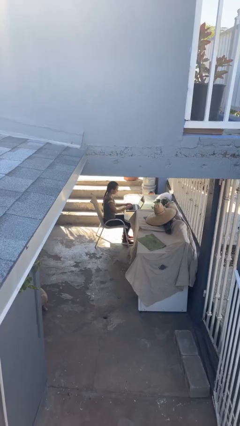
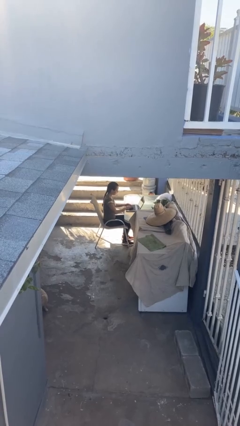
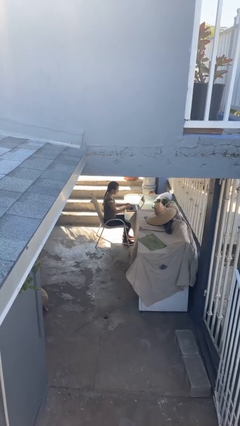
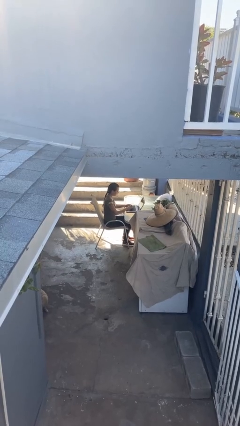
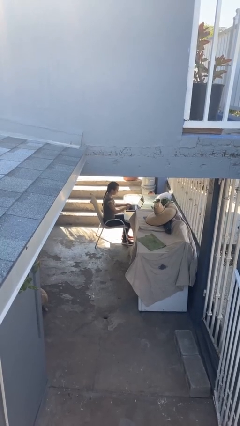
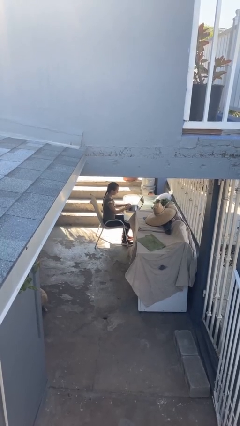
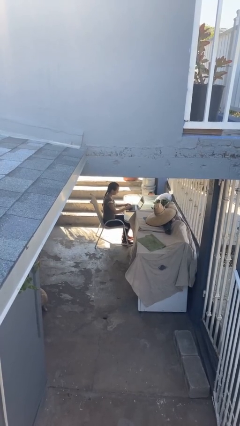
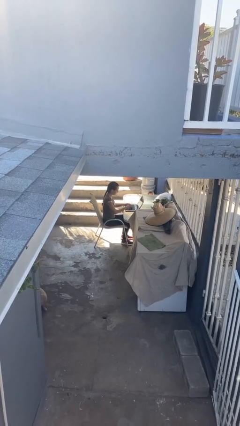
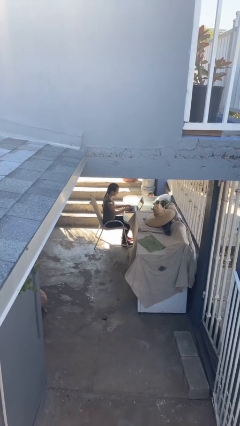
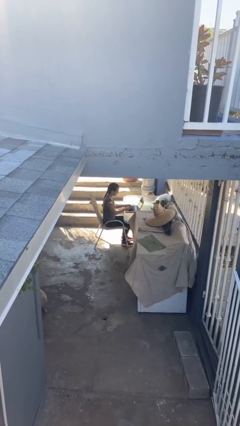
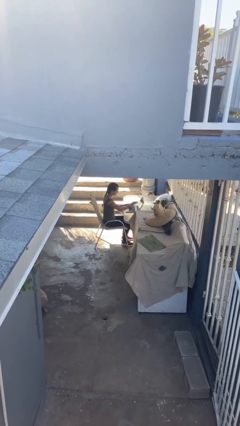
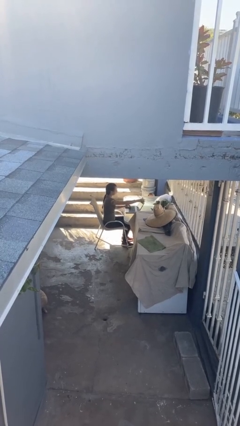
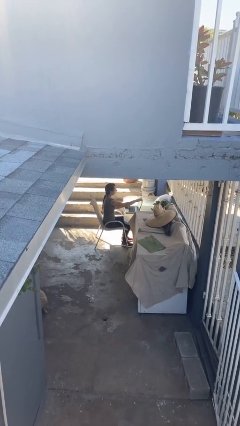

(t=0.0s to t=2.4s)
person interacts with laptop

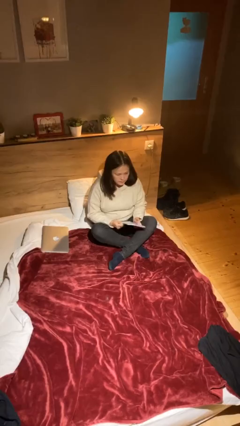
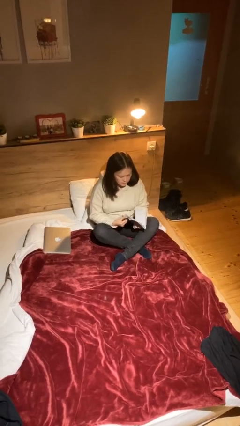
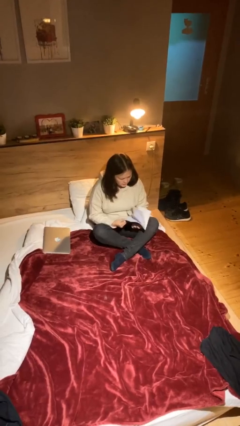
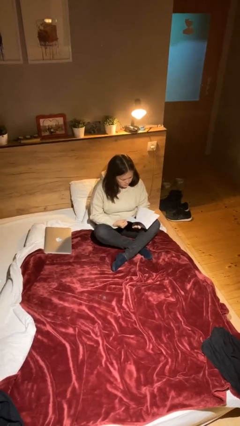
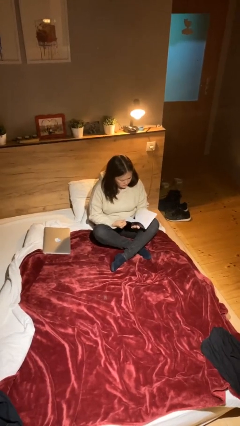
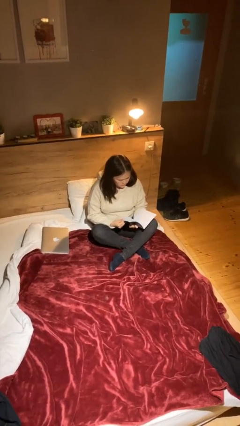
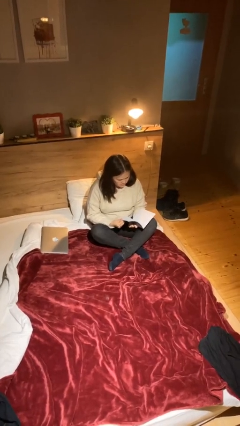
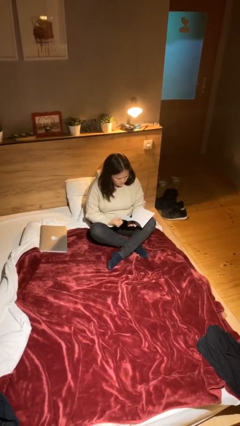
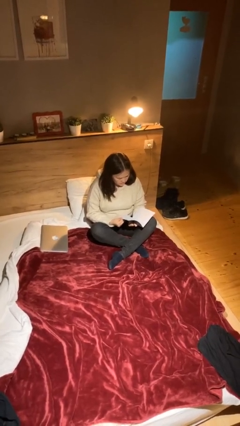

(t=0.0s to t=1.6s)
person reads document

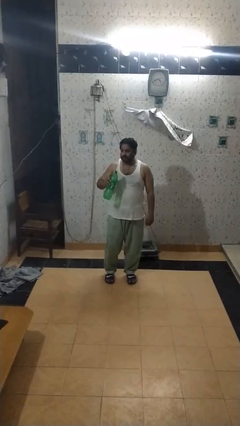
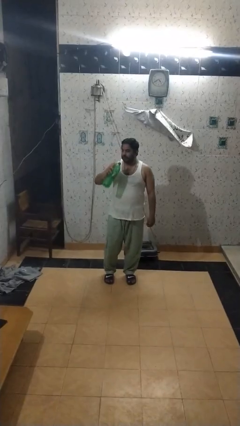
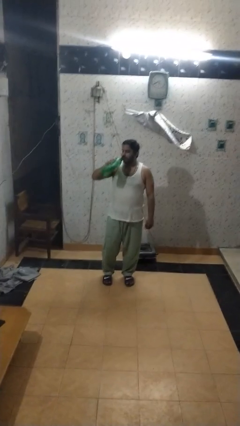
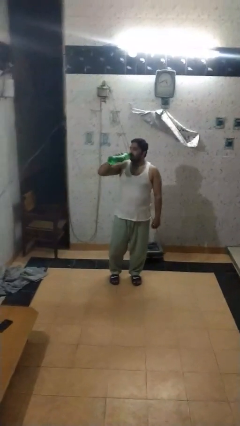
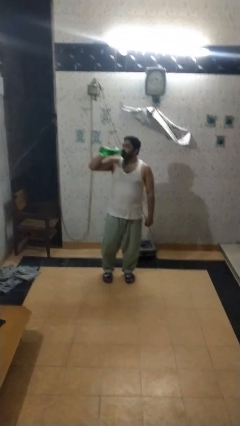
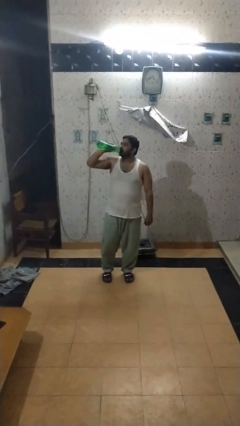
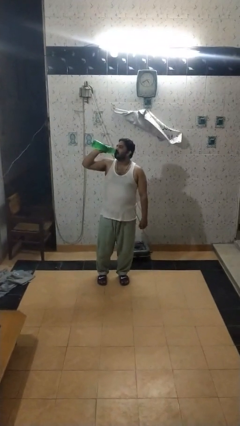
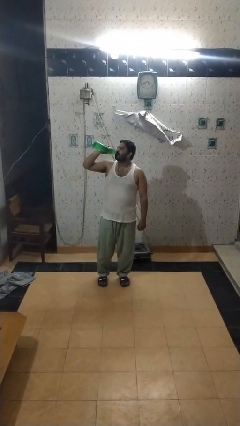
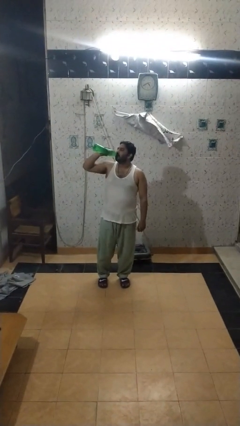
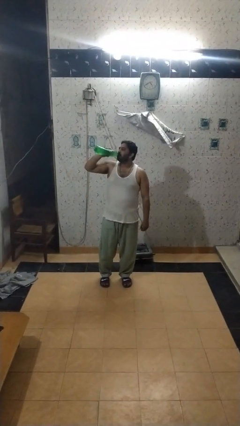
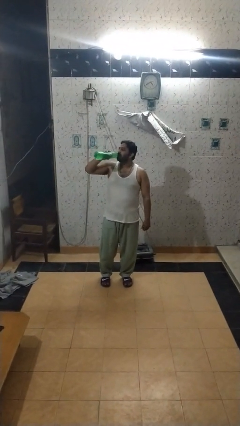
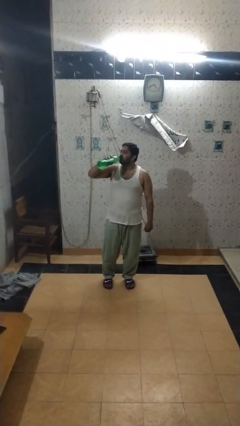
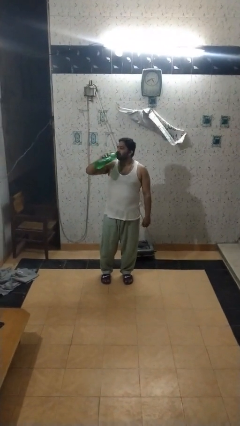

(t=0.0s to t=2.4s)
person drinks from bottle

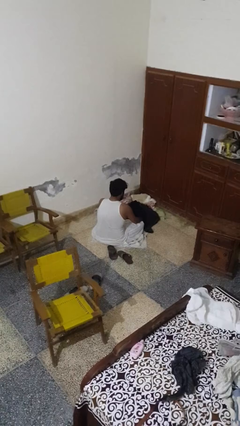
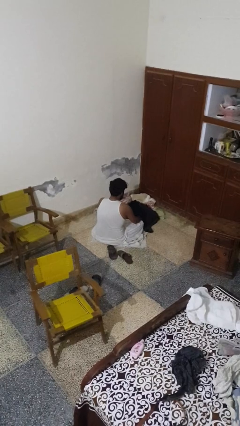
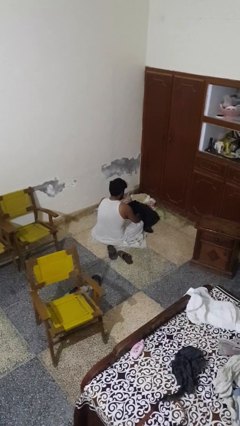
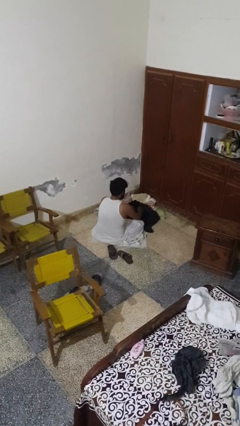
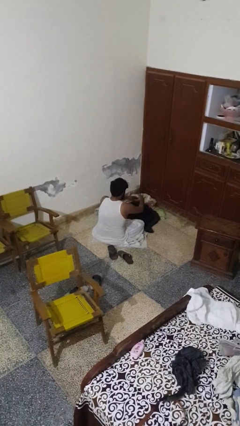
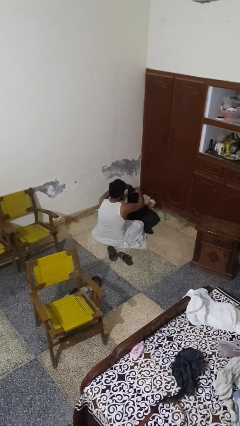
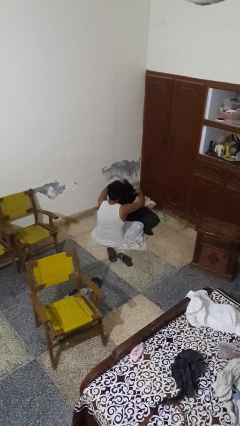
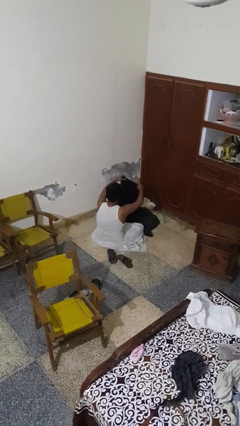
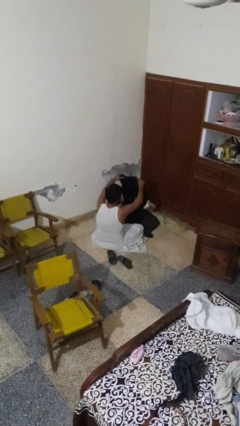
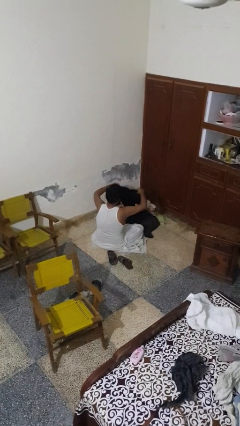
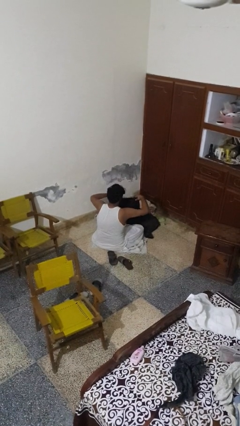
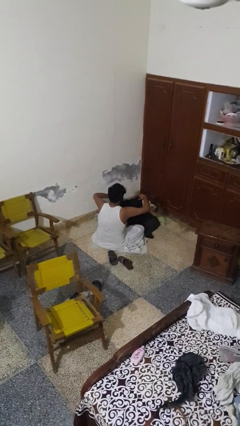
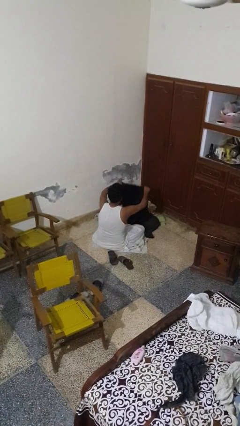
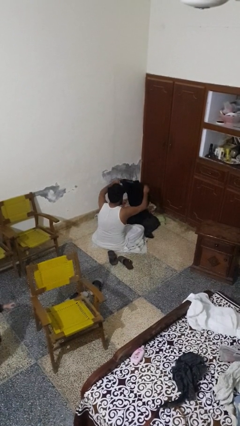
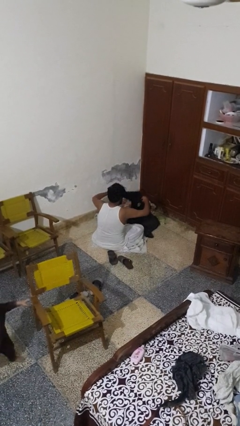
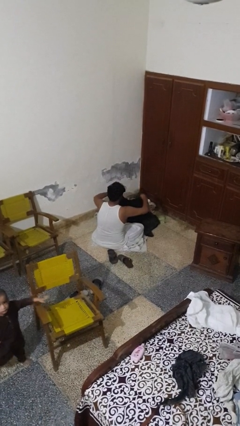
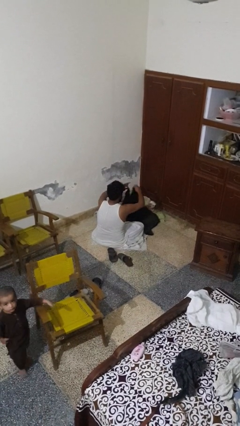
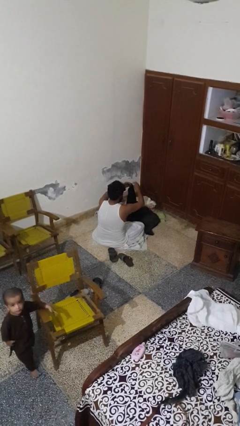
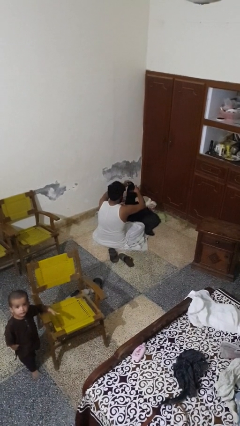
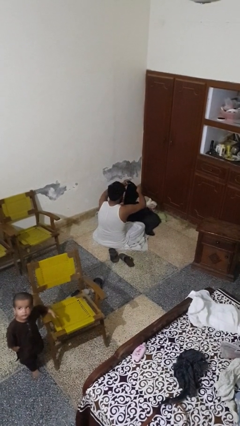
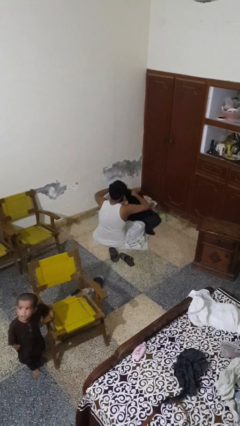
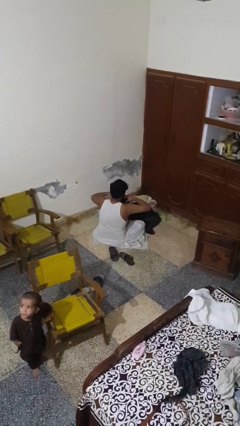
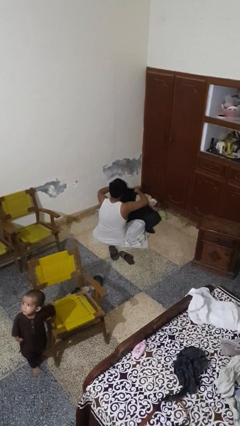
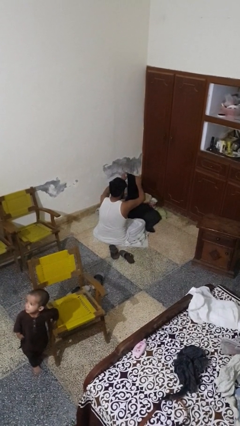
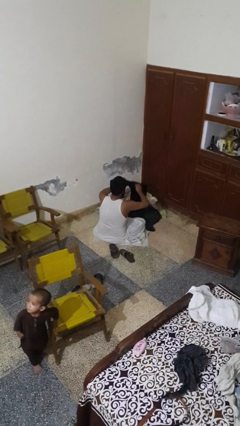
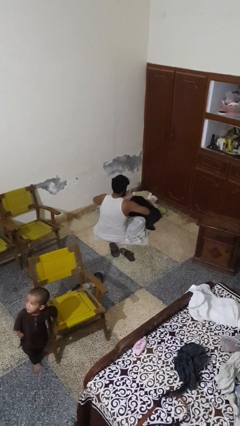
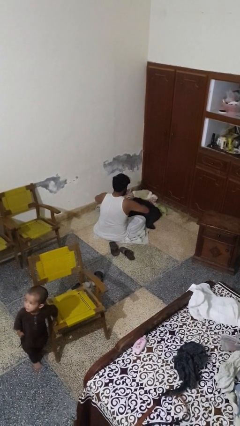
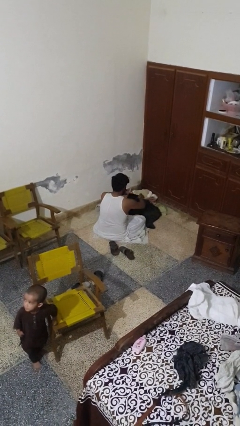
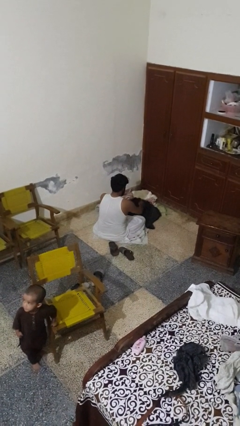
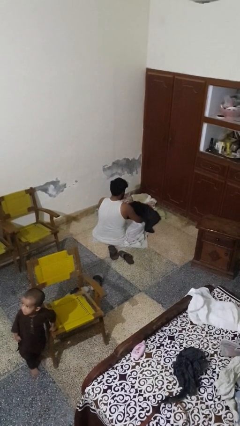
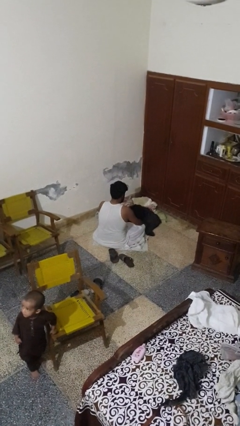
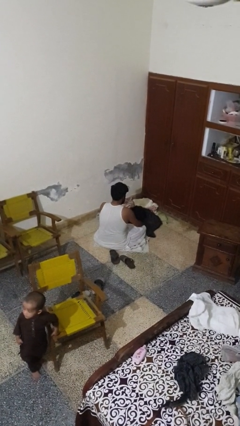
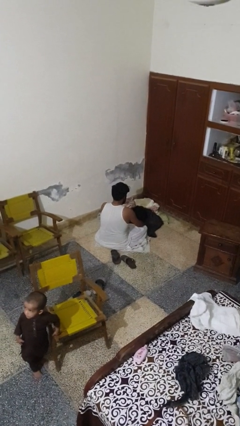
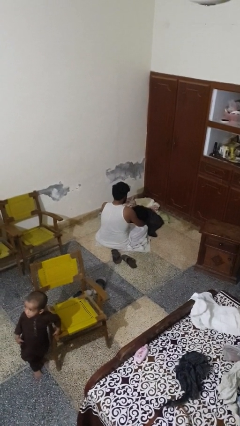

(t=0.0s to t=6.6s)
person folds pants

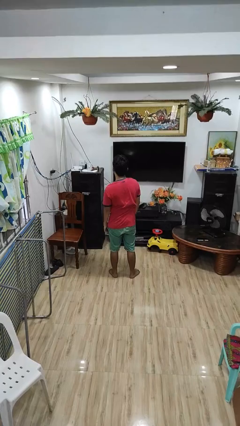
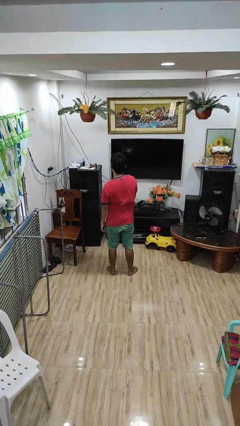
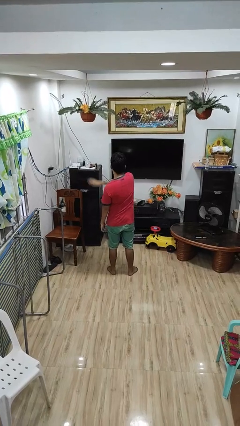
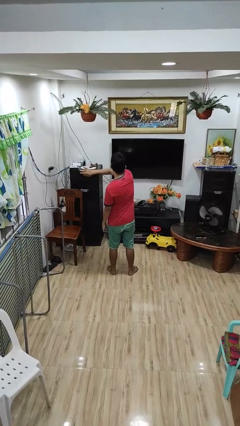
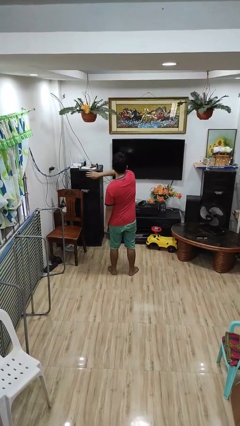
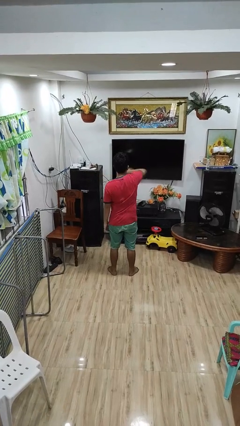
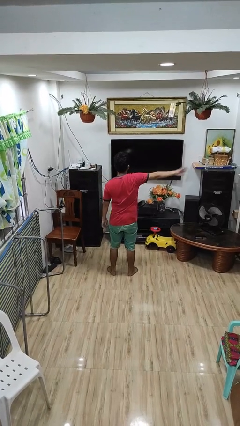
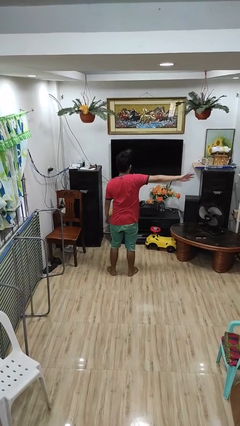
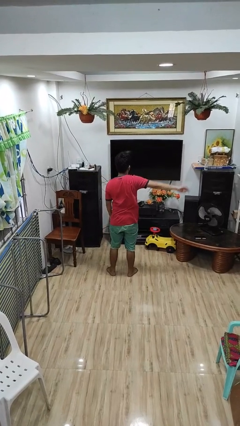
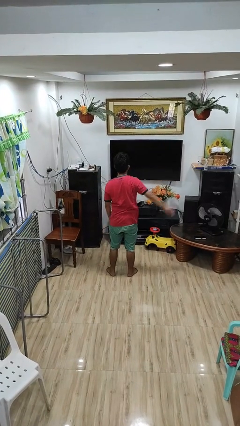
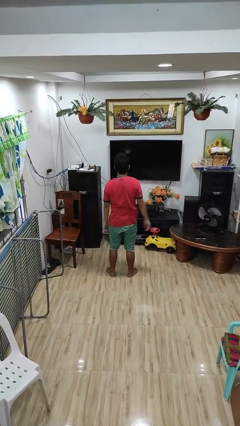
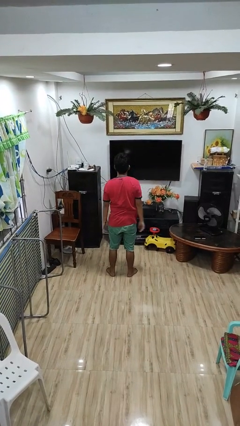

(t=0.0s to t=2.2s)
person gestures swipe right

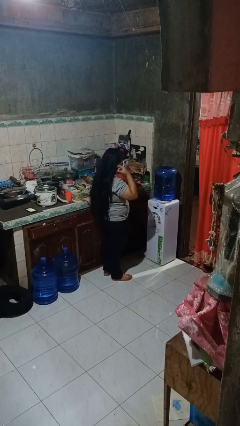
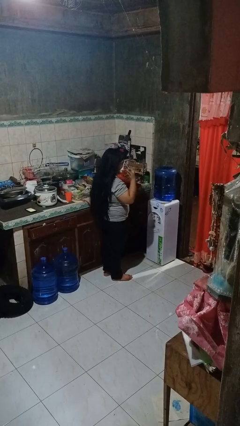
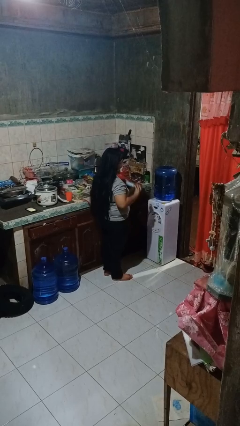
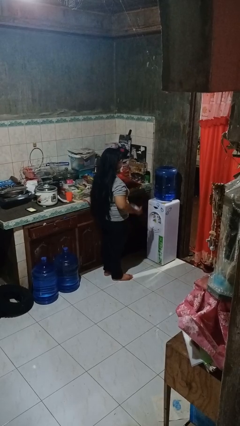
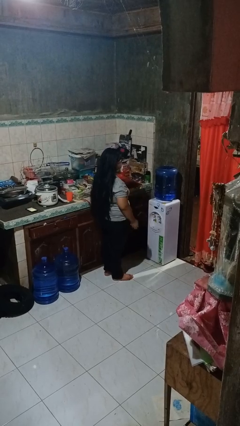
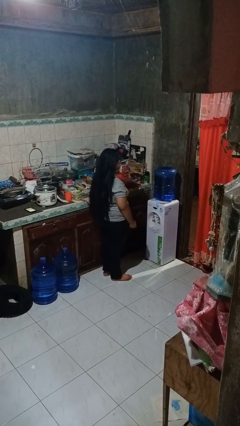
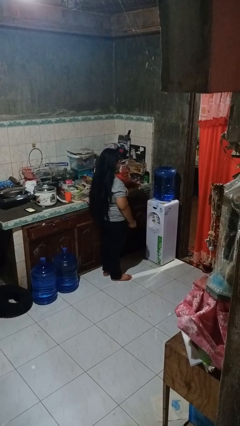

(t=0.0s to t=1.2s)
person takes off facemask

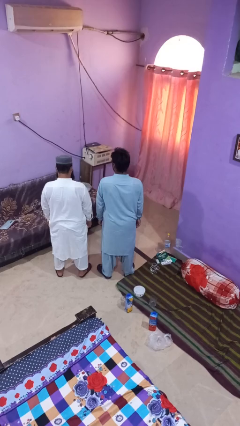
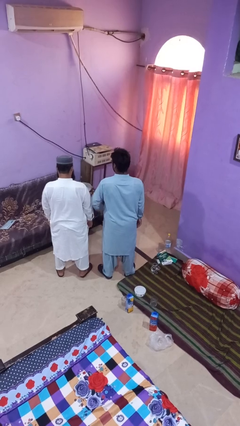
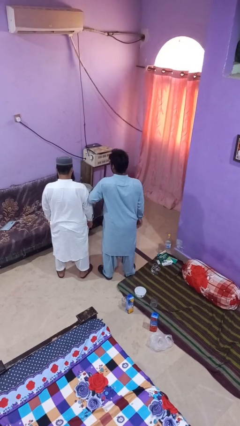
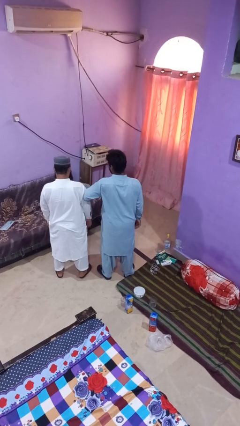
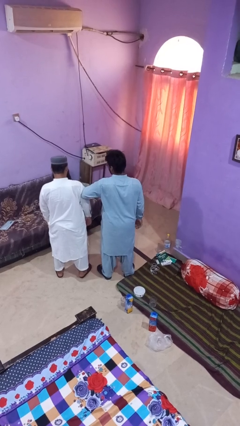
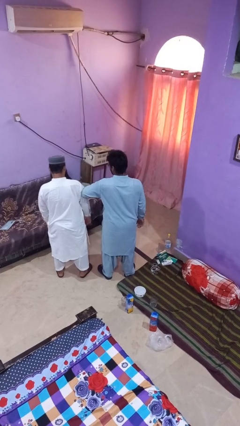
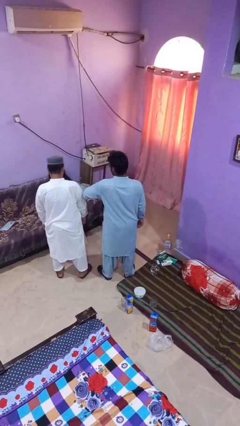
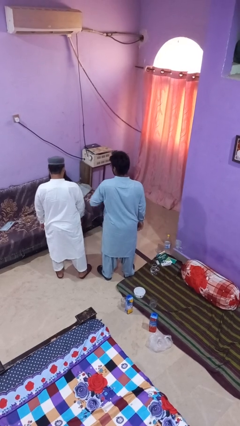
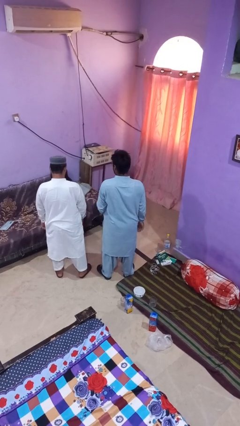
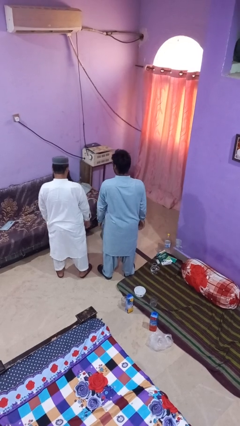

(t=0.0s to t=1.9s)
person nudges person with elbow
